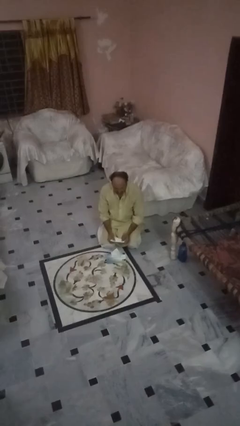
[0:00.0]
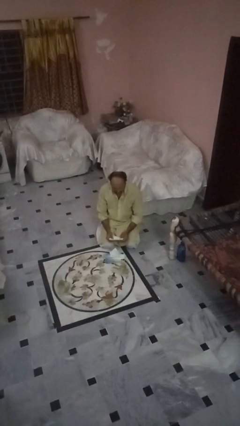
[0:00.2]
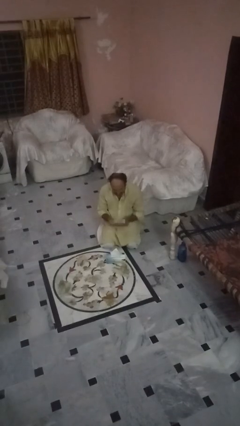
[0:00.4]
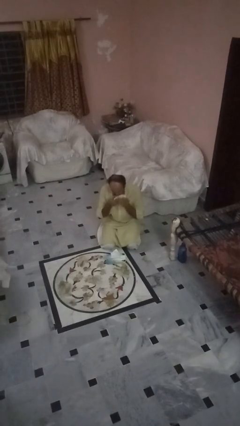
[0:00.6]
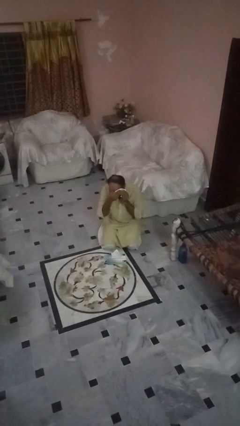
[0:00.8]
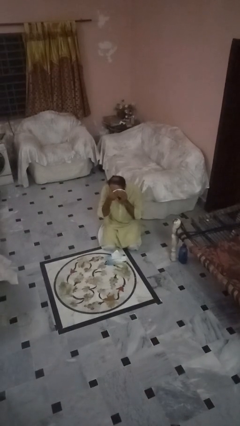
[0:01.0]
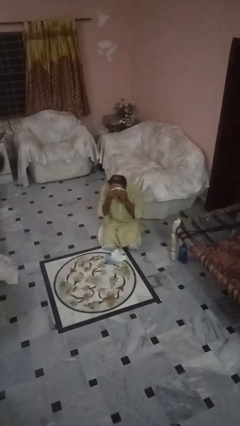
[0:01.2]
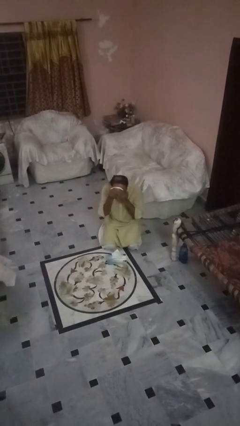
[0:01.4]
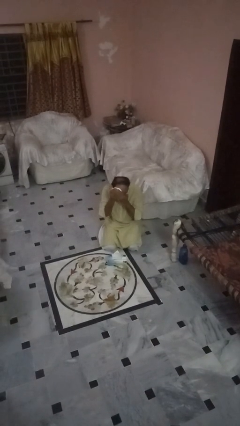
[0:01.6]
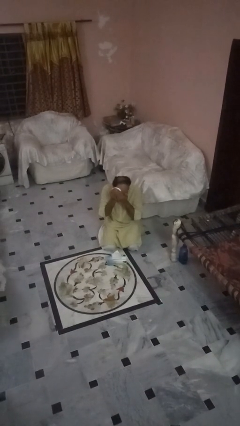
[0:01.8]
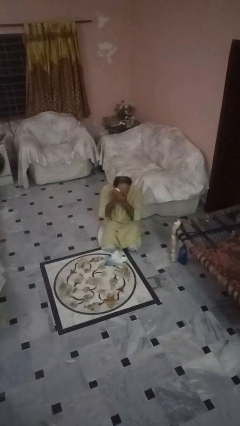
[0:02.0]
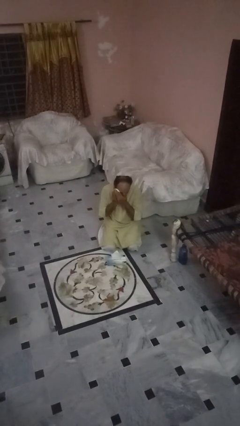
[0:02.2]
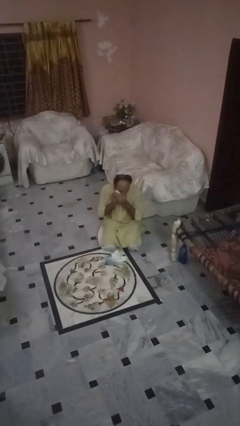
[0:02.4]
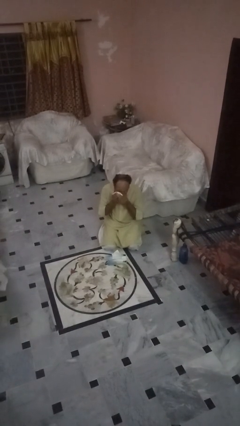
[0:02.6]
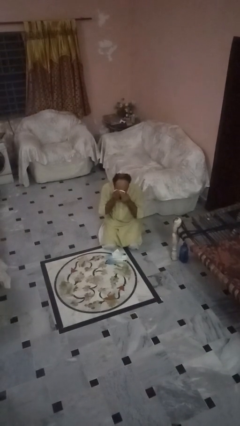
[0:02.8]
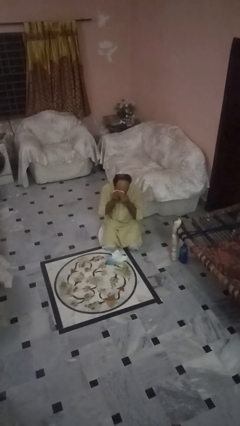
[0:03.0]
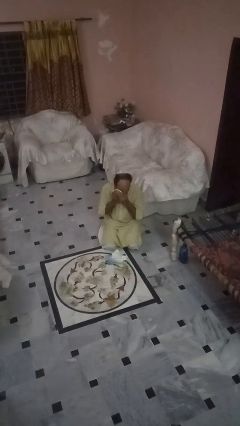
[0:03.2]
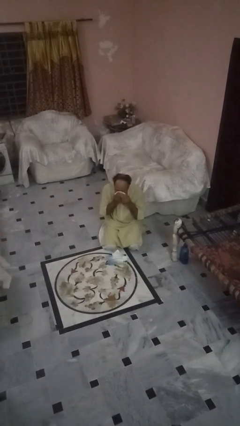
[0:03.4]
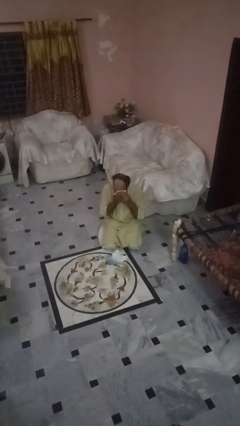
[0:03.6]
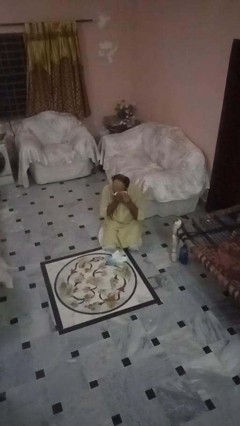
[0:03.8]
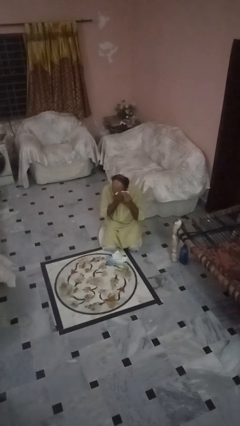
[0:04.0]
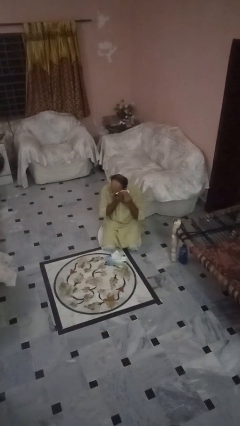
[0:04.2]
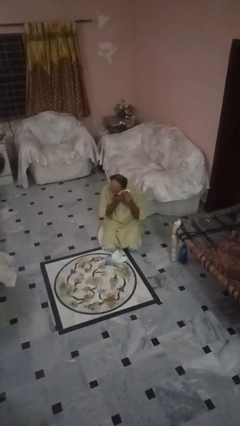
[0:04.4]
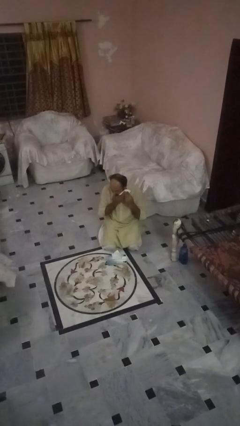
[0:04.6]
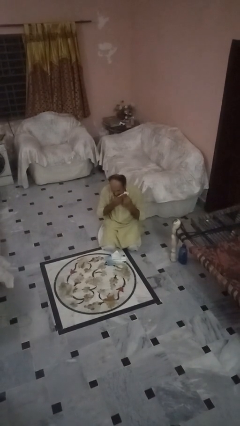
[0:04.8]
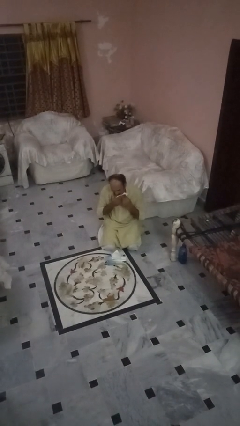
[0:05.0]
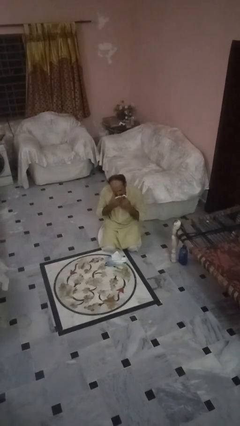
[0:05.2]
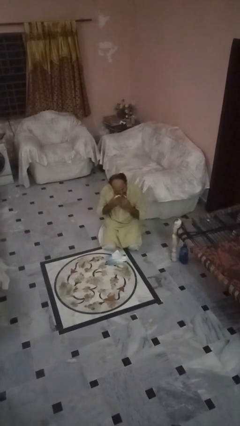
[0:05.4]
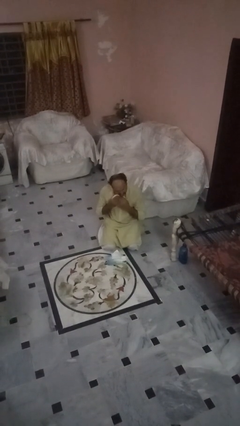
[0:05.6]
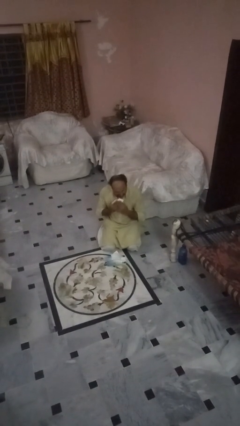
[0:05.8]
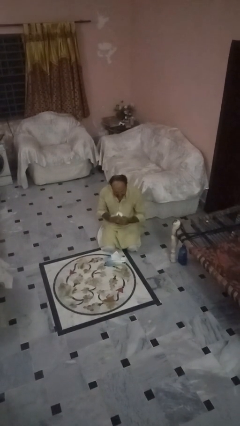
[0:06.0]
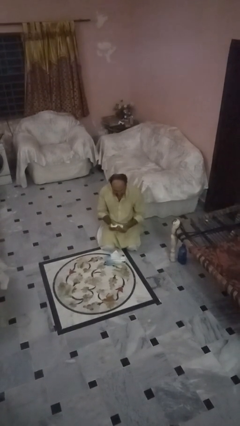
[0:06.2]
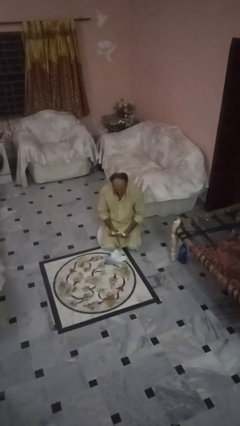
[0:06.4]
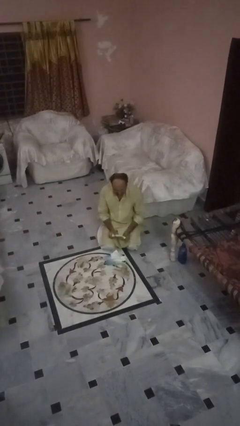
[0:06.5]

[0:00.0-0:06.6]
person wipes mouth with napkin

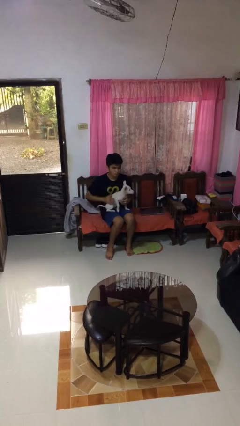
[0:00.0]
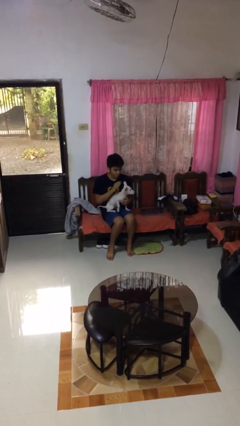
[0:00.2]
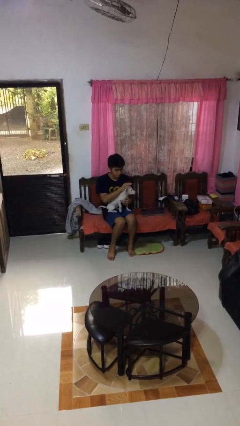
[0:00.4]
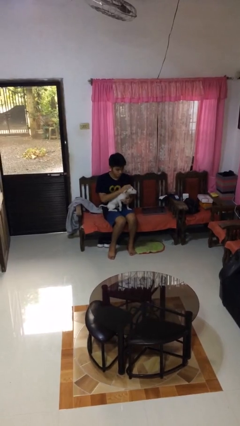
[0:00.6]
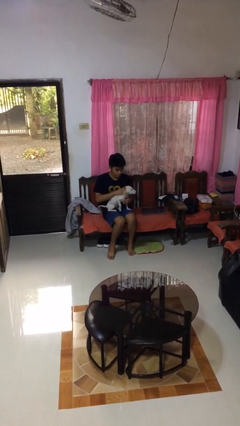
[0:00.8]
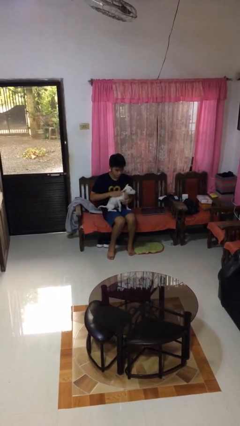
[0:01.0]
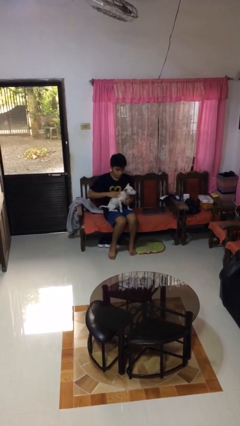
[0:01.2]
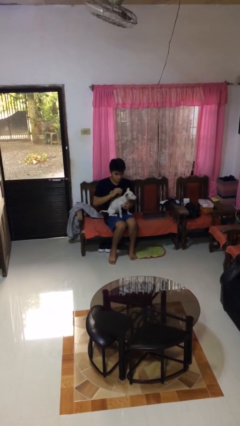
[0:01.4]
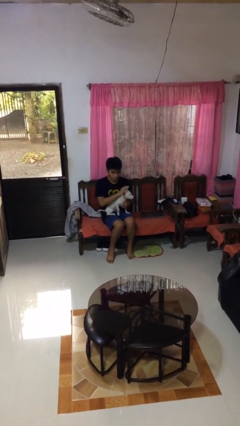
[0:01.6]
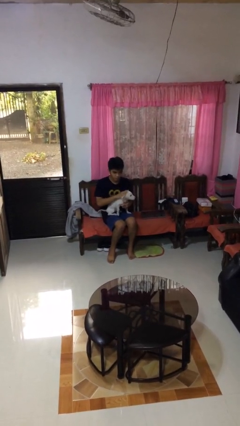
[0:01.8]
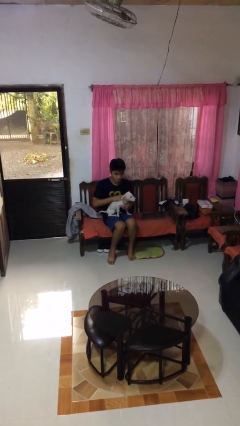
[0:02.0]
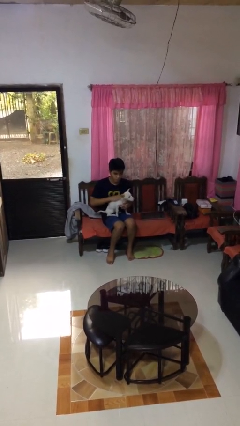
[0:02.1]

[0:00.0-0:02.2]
person pets dog

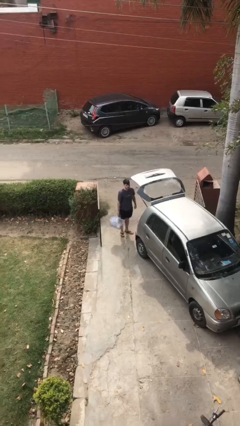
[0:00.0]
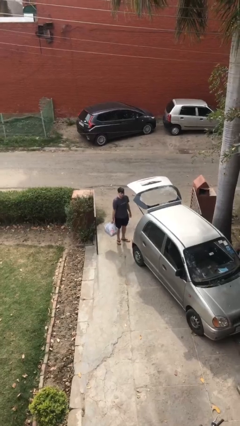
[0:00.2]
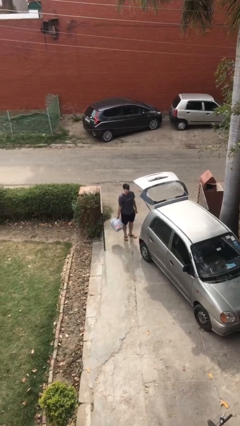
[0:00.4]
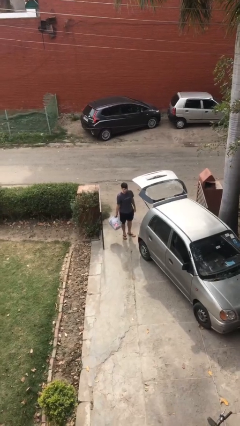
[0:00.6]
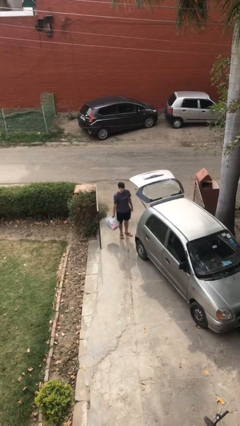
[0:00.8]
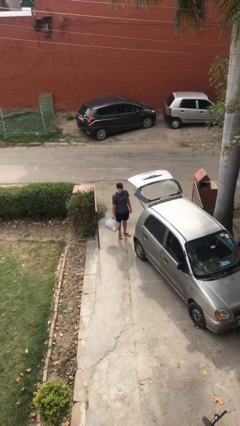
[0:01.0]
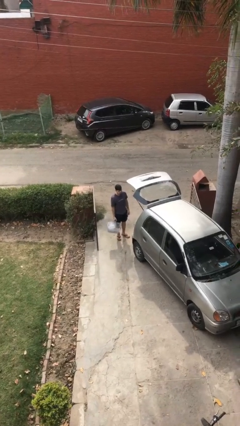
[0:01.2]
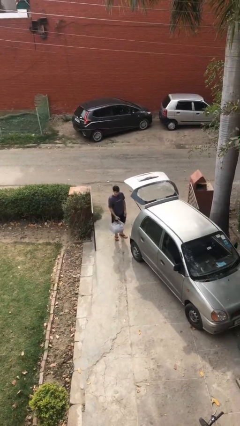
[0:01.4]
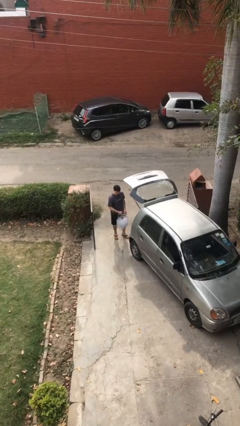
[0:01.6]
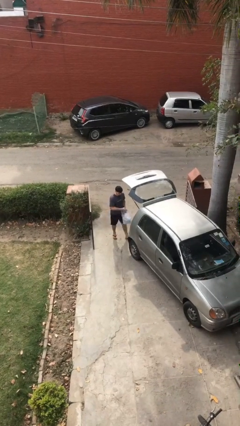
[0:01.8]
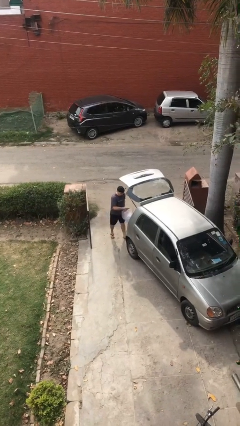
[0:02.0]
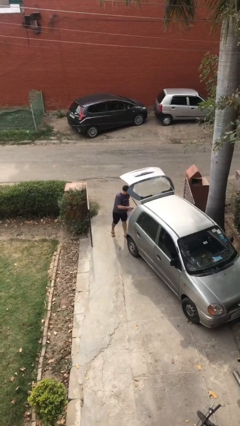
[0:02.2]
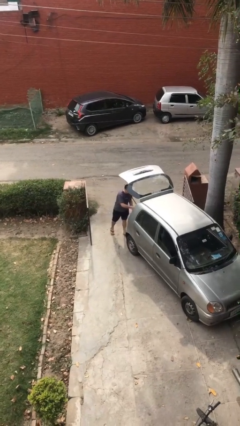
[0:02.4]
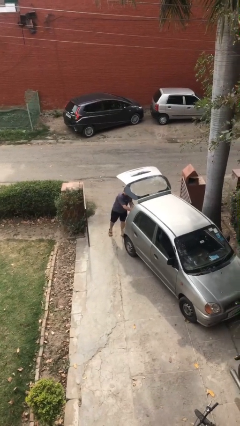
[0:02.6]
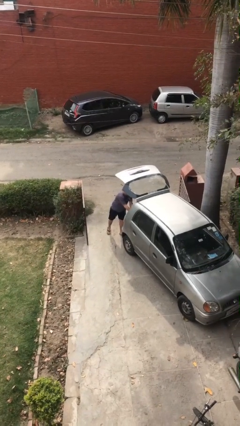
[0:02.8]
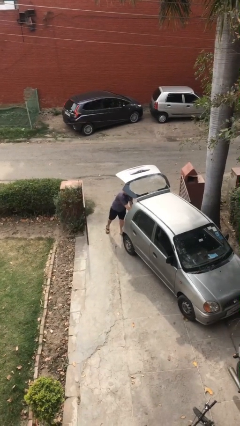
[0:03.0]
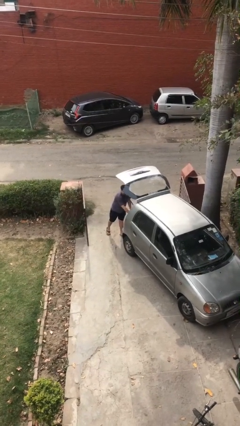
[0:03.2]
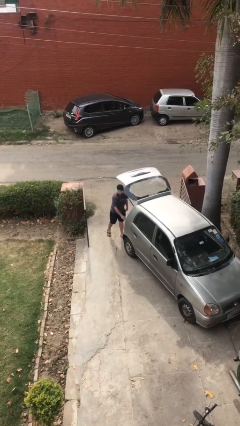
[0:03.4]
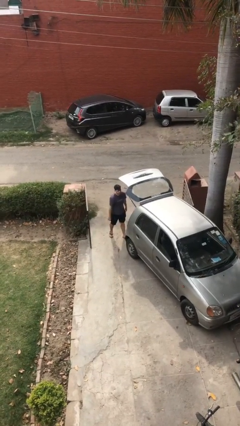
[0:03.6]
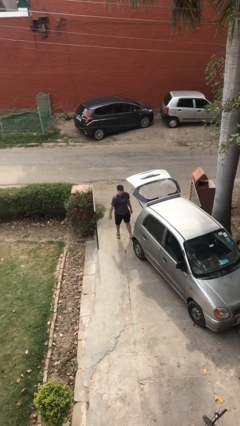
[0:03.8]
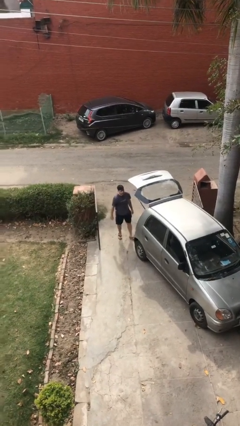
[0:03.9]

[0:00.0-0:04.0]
person loads car

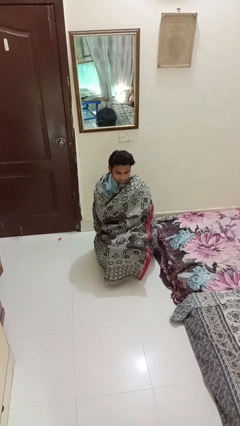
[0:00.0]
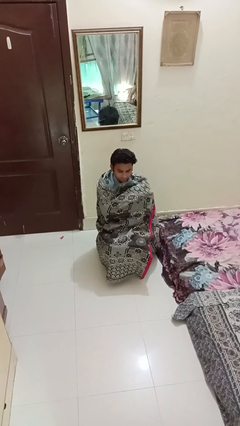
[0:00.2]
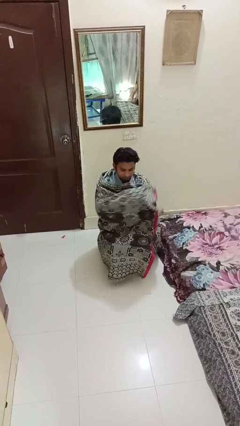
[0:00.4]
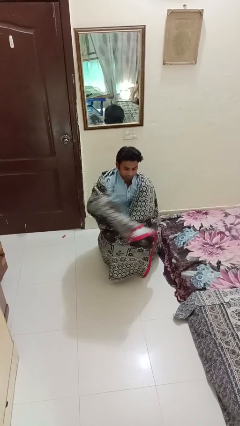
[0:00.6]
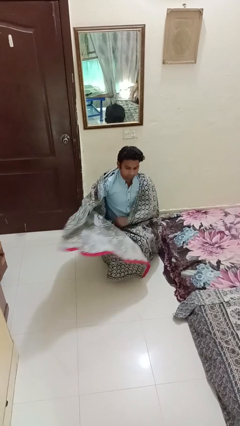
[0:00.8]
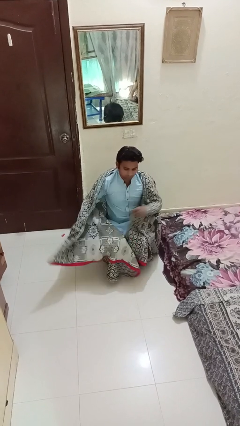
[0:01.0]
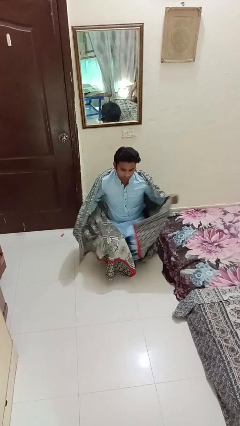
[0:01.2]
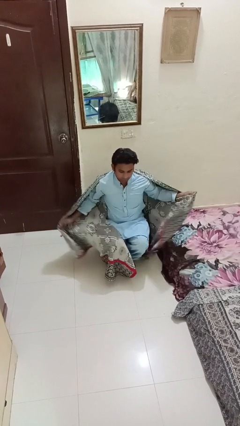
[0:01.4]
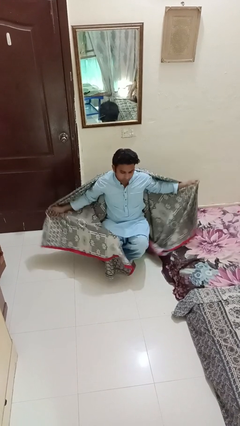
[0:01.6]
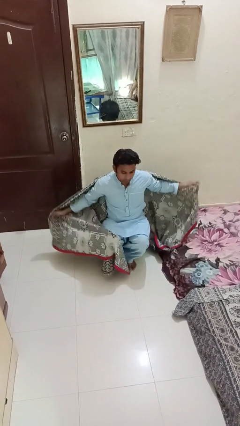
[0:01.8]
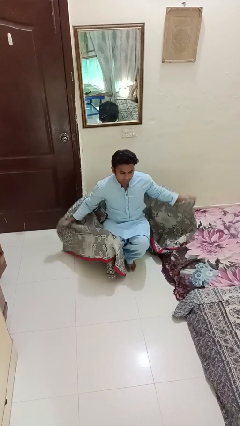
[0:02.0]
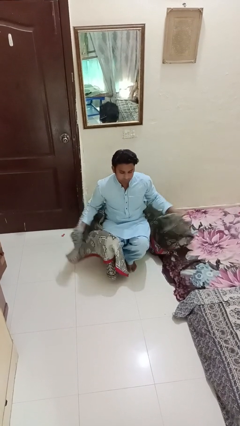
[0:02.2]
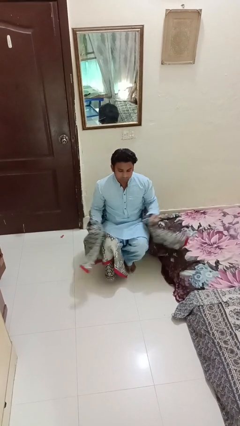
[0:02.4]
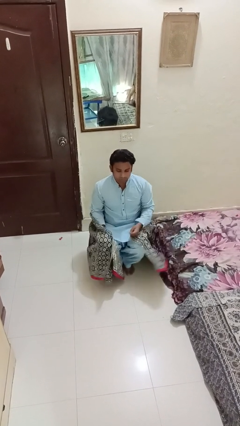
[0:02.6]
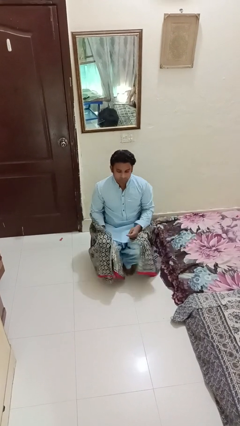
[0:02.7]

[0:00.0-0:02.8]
person uncovers with blanket

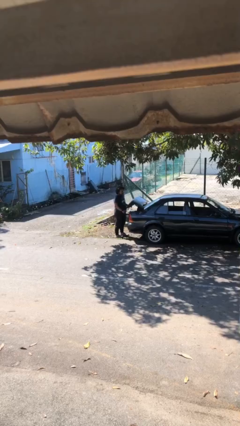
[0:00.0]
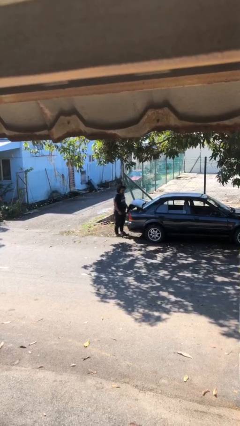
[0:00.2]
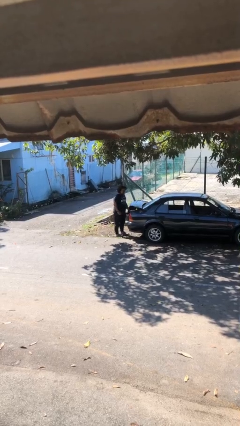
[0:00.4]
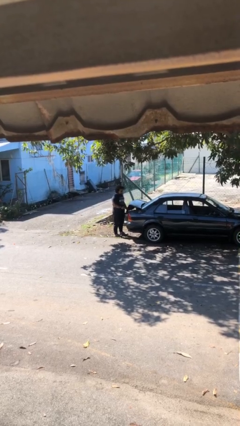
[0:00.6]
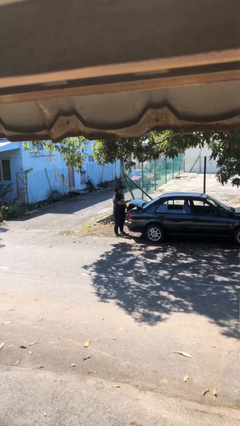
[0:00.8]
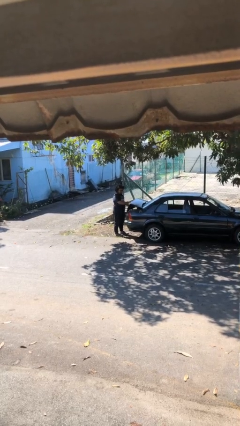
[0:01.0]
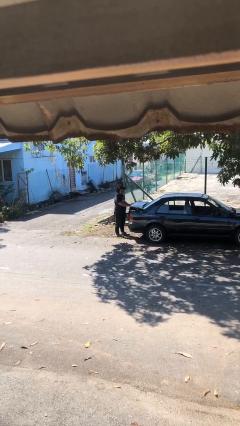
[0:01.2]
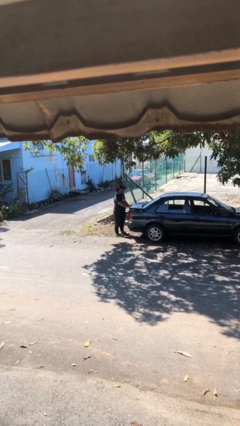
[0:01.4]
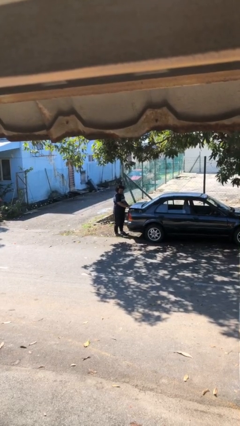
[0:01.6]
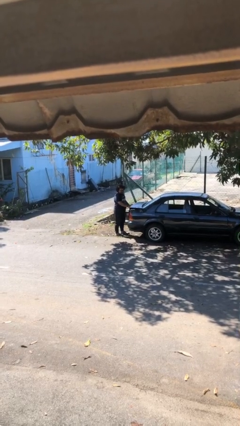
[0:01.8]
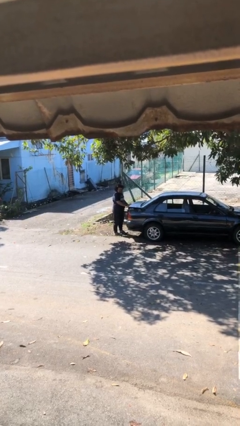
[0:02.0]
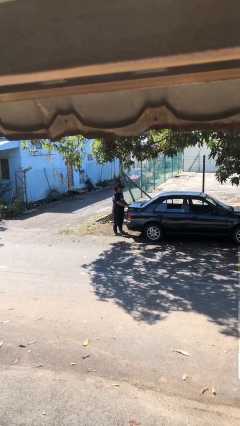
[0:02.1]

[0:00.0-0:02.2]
person closes car trunk

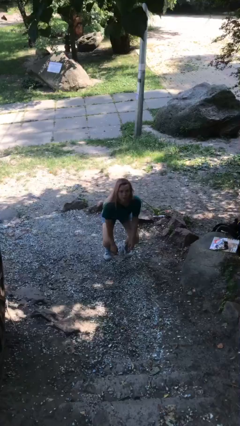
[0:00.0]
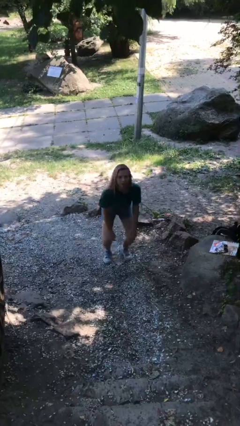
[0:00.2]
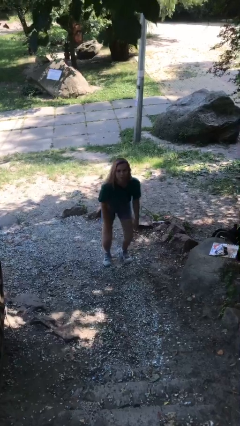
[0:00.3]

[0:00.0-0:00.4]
person stands up
